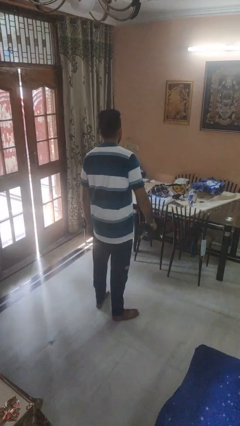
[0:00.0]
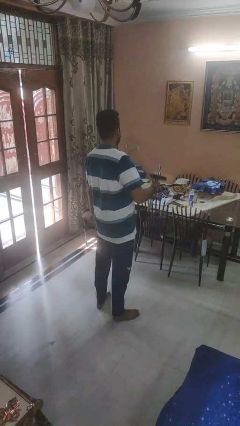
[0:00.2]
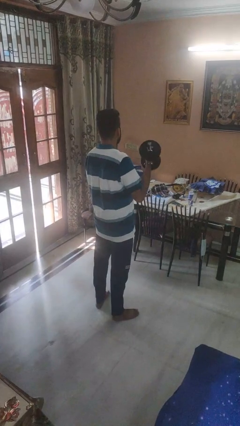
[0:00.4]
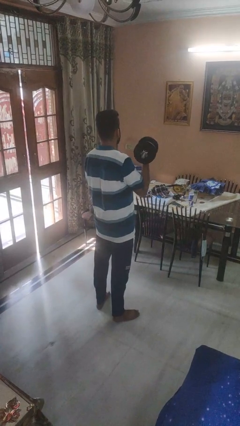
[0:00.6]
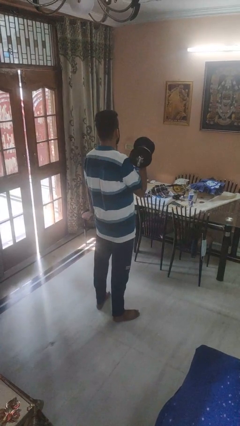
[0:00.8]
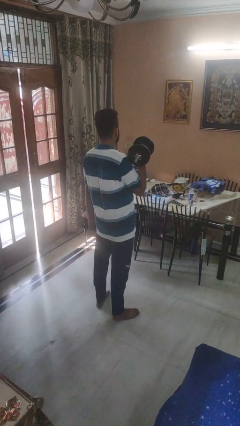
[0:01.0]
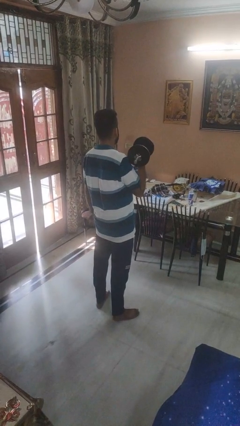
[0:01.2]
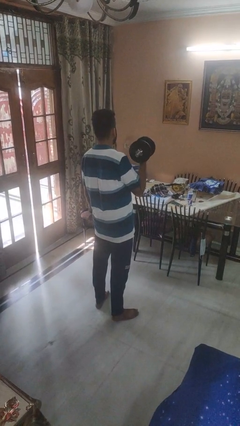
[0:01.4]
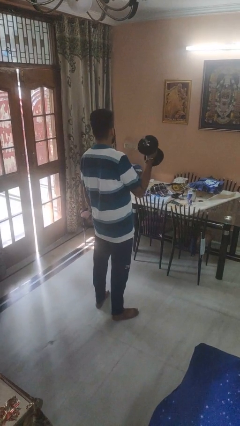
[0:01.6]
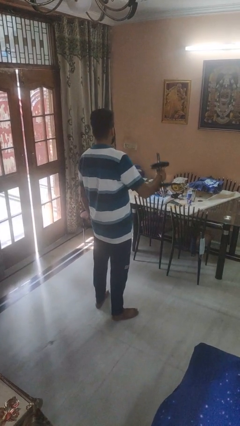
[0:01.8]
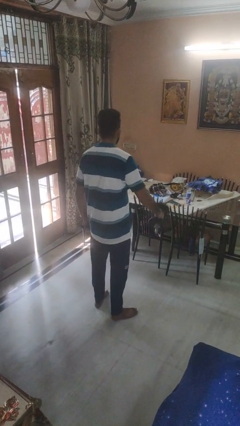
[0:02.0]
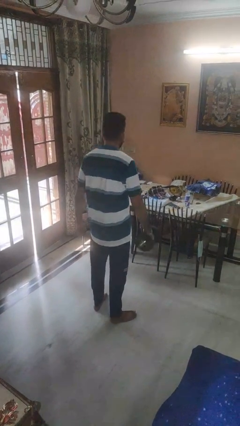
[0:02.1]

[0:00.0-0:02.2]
person lifts dumbbells

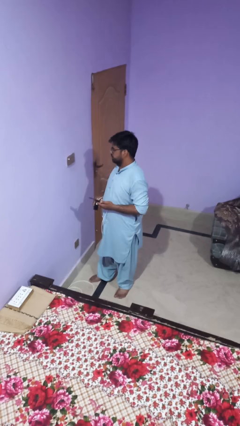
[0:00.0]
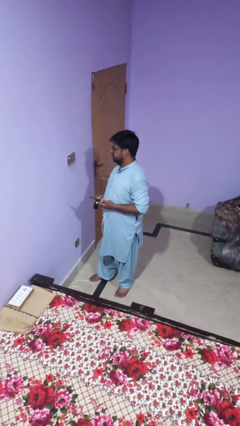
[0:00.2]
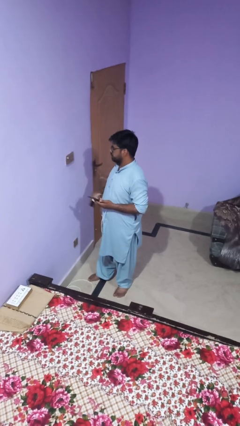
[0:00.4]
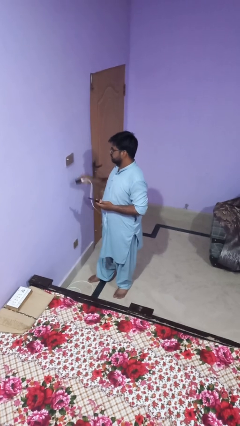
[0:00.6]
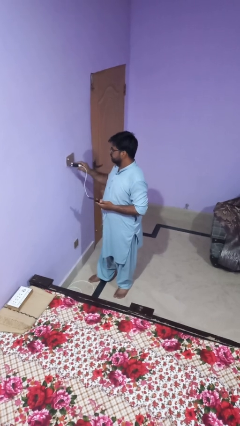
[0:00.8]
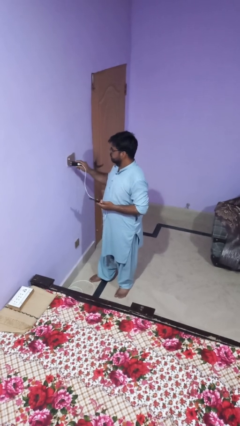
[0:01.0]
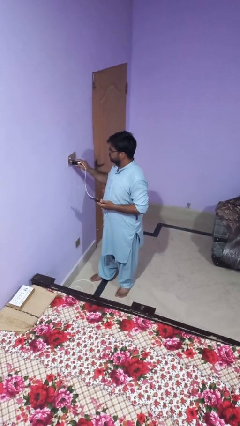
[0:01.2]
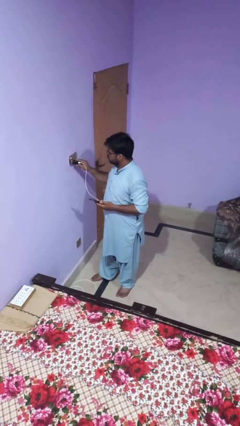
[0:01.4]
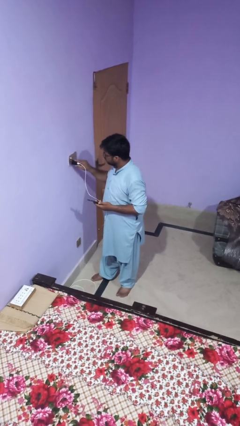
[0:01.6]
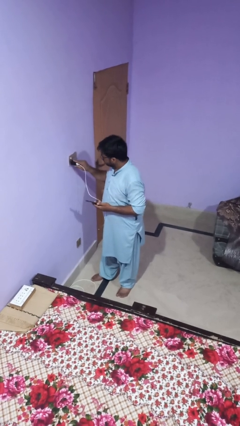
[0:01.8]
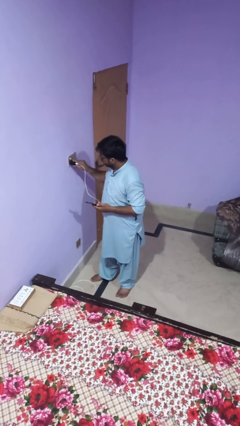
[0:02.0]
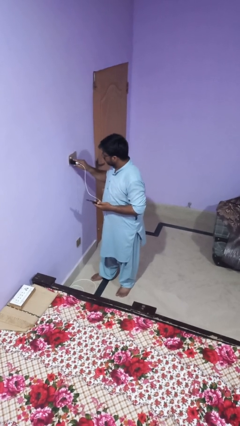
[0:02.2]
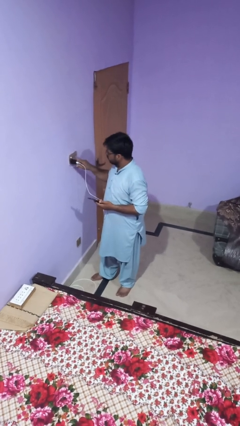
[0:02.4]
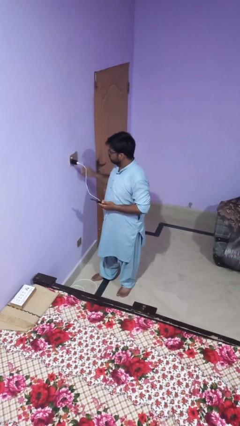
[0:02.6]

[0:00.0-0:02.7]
person plugs into electrical socket

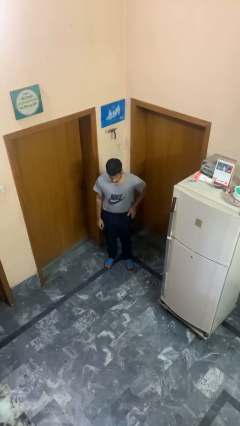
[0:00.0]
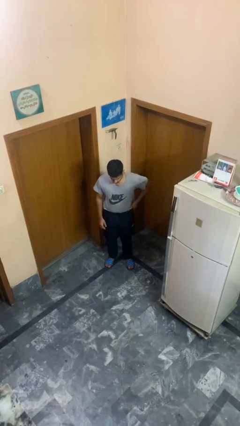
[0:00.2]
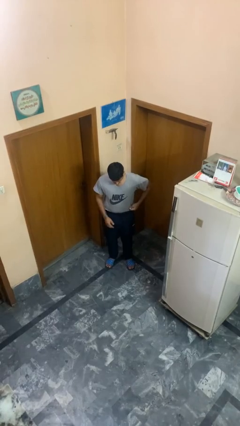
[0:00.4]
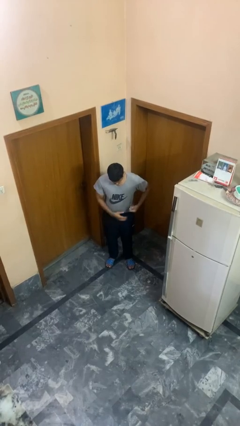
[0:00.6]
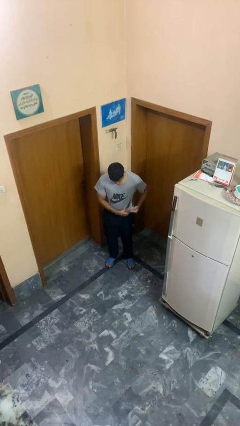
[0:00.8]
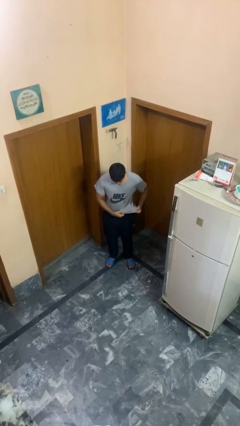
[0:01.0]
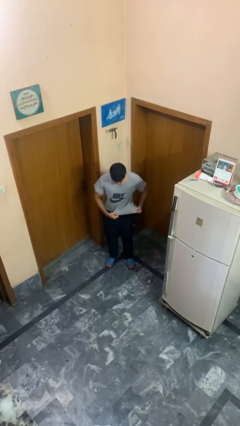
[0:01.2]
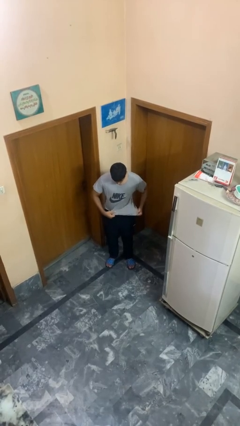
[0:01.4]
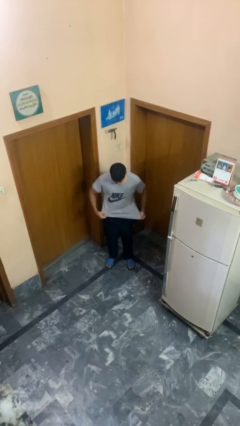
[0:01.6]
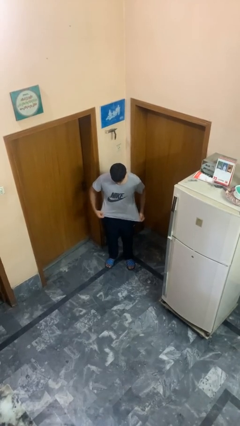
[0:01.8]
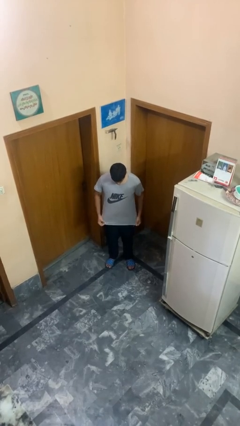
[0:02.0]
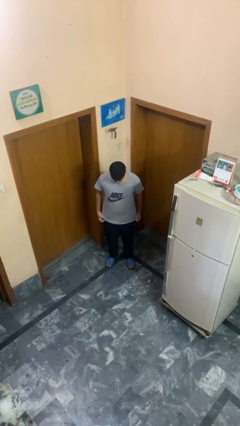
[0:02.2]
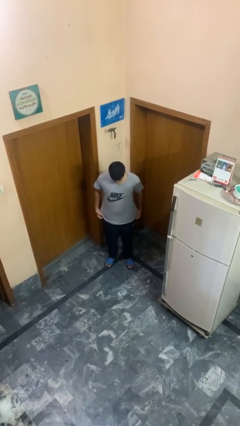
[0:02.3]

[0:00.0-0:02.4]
person untucks shirt

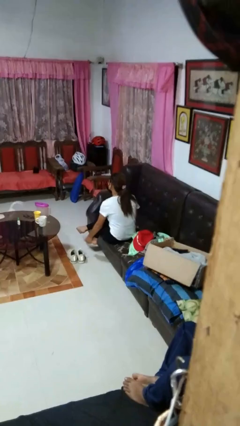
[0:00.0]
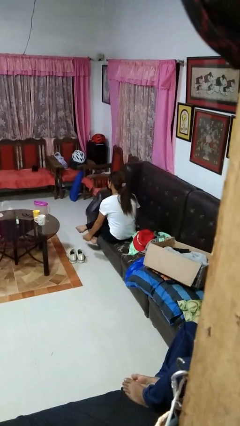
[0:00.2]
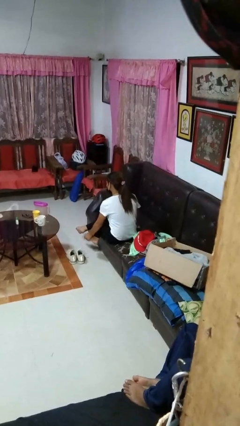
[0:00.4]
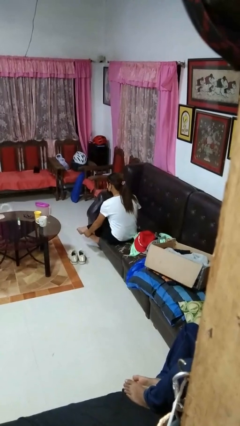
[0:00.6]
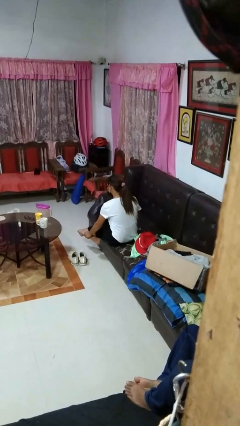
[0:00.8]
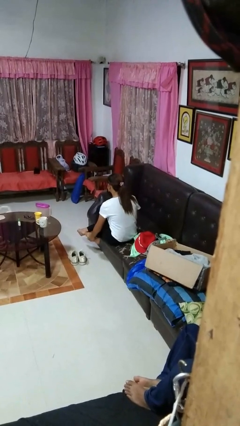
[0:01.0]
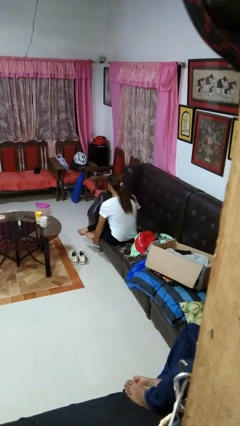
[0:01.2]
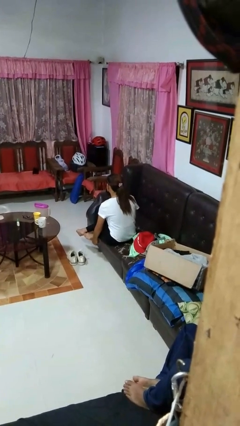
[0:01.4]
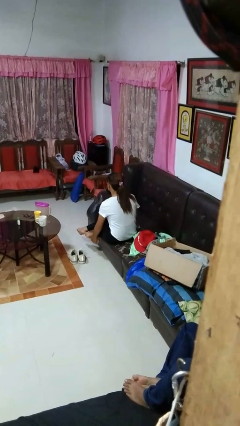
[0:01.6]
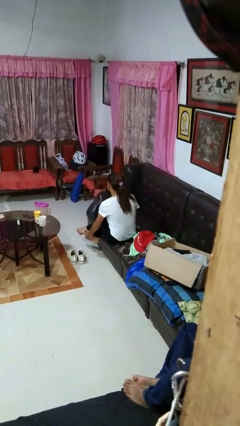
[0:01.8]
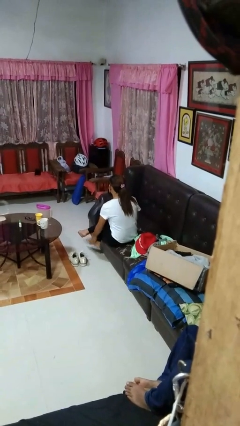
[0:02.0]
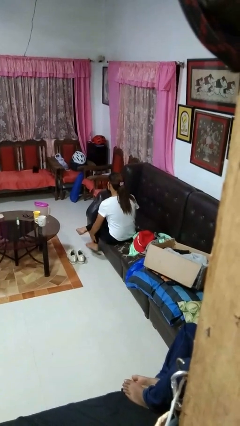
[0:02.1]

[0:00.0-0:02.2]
person rubs foot

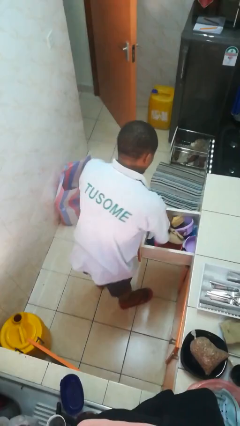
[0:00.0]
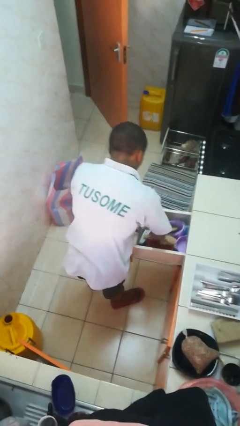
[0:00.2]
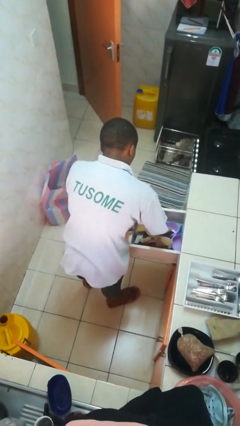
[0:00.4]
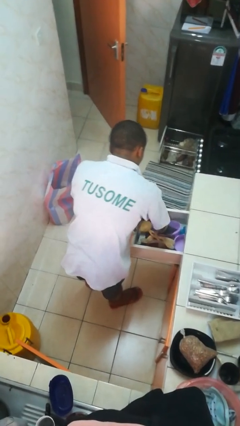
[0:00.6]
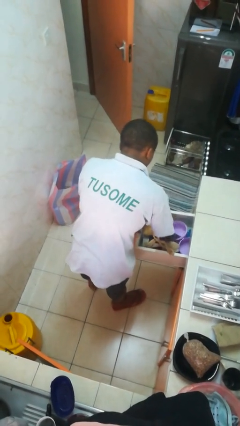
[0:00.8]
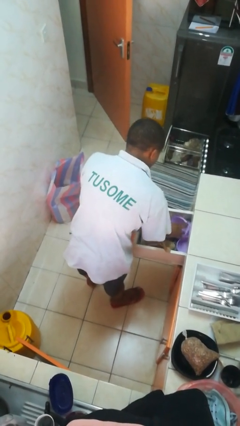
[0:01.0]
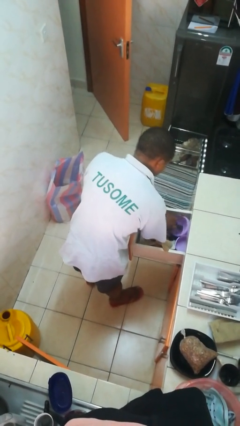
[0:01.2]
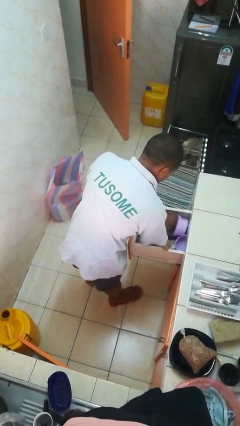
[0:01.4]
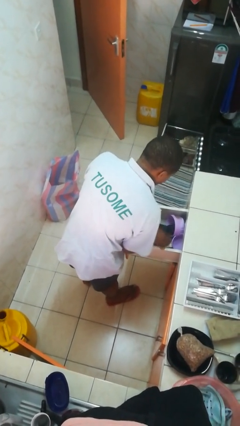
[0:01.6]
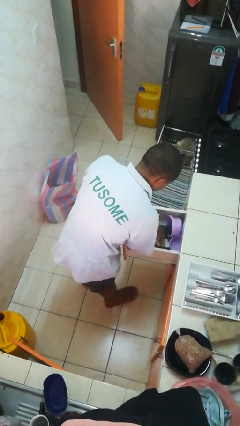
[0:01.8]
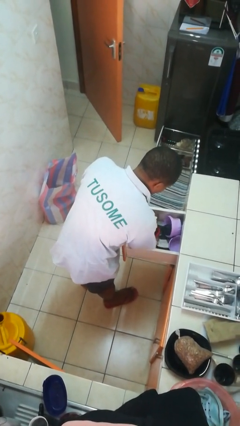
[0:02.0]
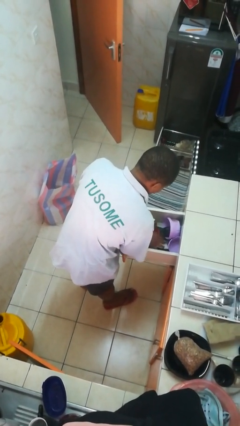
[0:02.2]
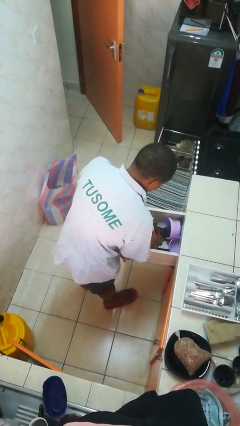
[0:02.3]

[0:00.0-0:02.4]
person searches in kitchen drawer

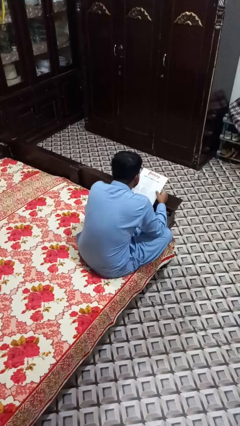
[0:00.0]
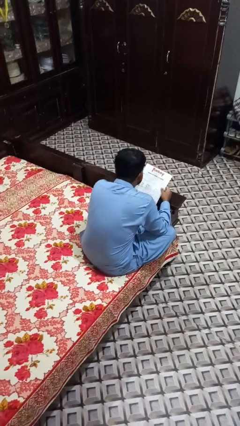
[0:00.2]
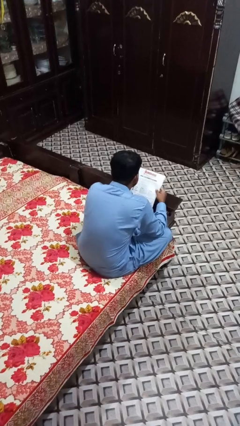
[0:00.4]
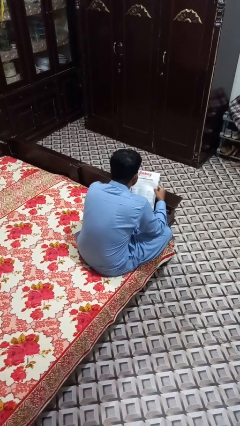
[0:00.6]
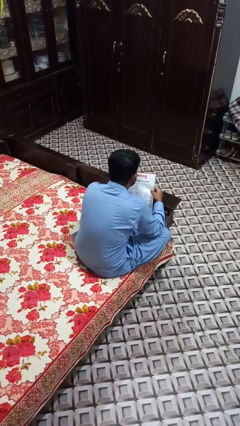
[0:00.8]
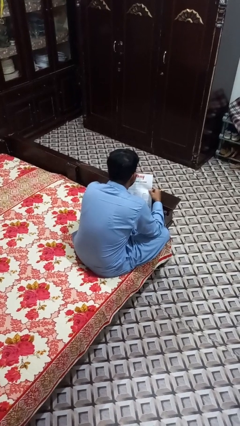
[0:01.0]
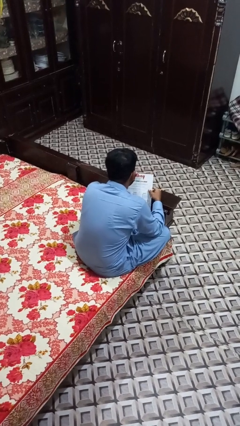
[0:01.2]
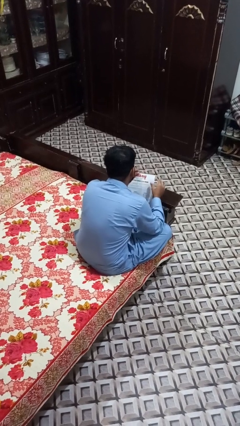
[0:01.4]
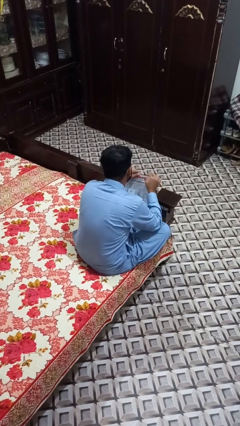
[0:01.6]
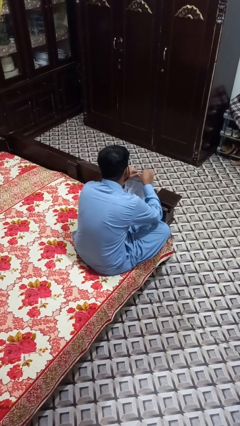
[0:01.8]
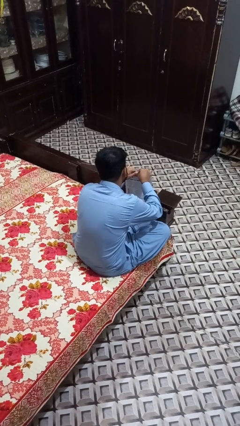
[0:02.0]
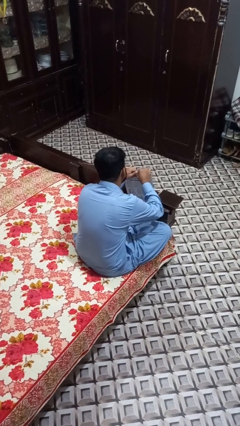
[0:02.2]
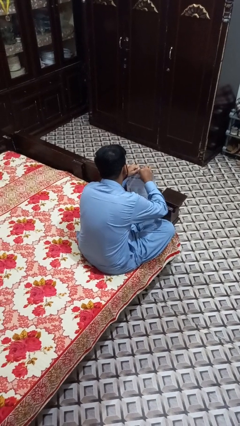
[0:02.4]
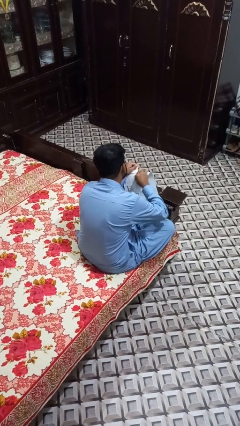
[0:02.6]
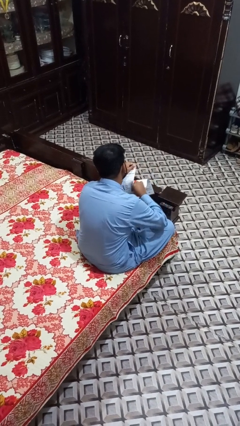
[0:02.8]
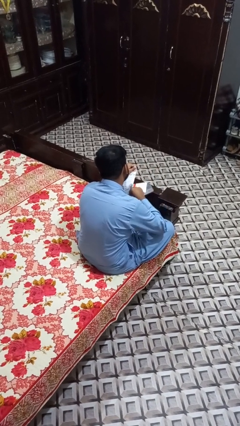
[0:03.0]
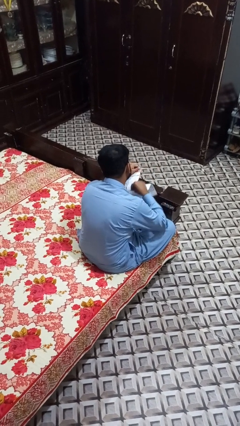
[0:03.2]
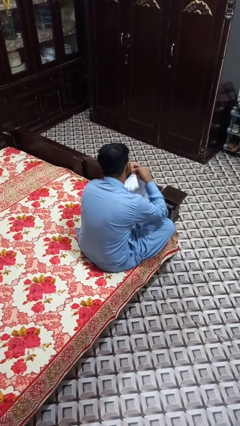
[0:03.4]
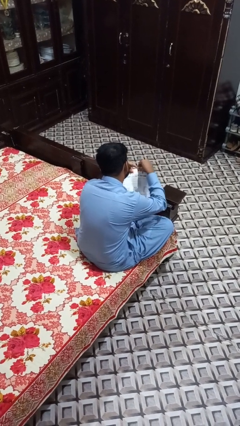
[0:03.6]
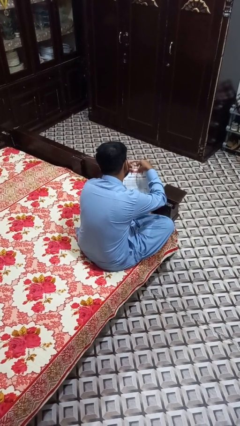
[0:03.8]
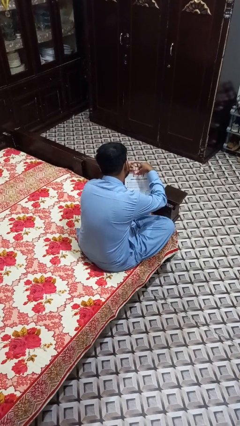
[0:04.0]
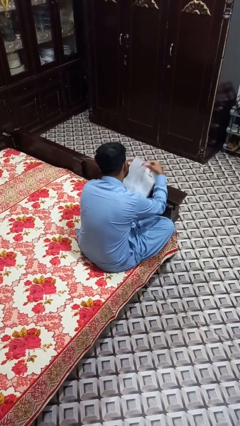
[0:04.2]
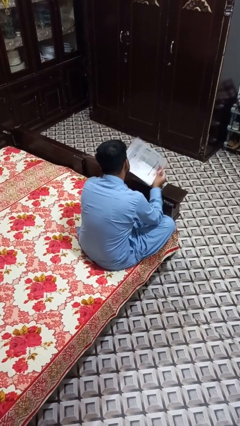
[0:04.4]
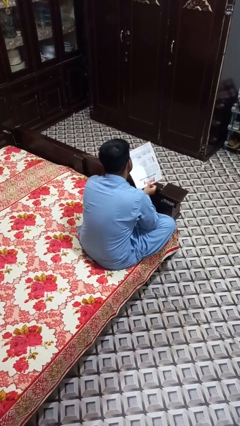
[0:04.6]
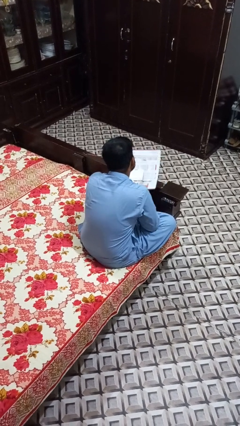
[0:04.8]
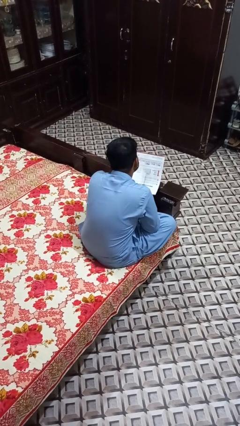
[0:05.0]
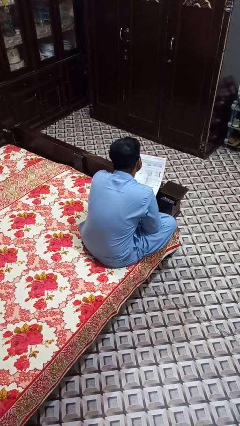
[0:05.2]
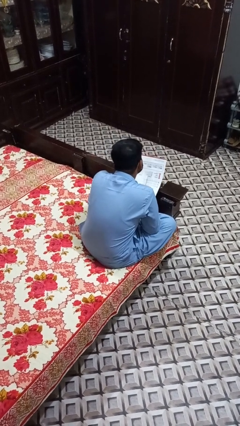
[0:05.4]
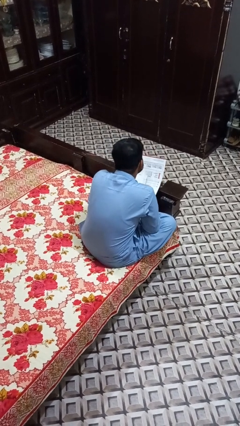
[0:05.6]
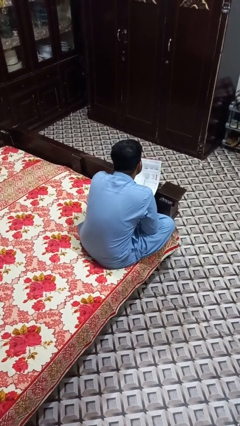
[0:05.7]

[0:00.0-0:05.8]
person tears paper
